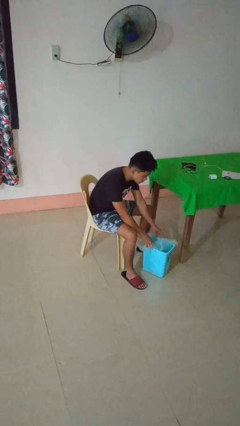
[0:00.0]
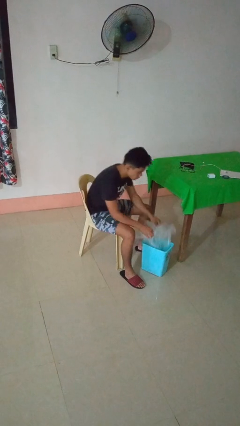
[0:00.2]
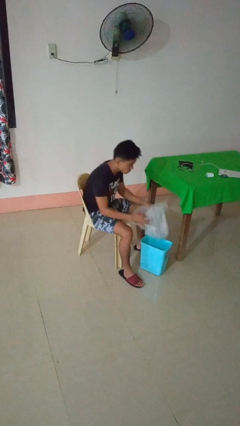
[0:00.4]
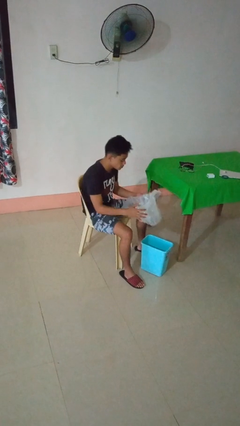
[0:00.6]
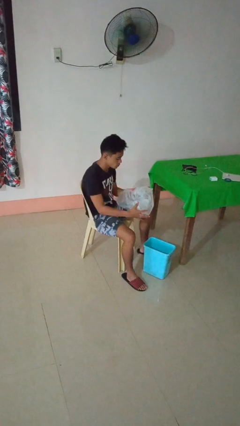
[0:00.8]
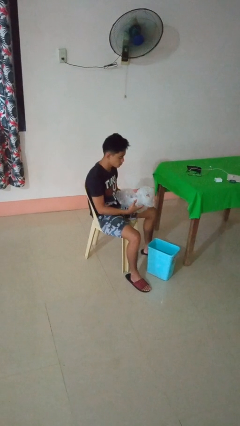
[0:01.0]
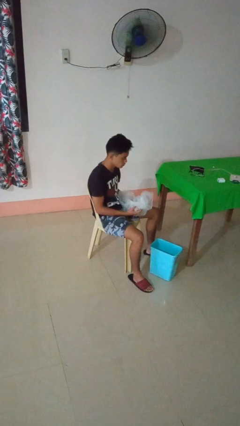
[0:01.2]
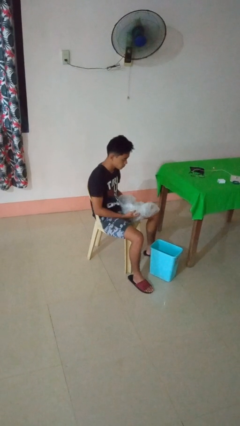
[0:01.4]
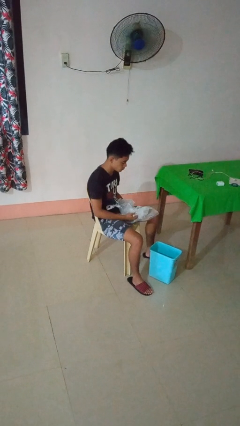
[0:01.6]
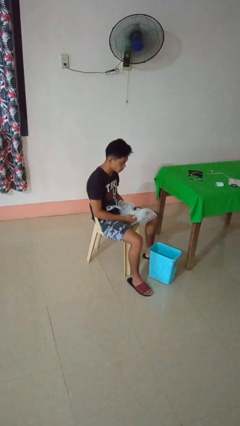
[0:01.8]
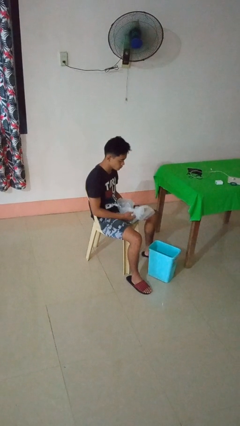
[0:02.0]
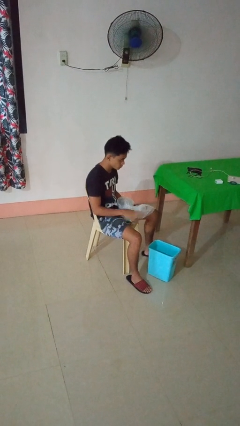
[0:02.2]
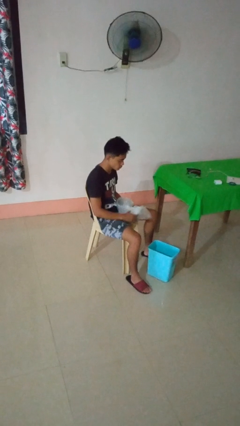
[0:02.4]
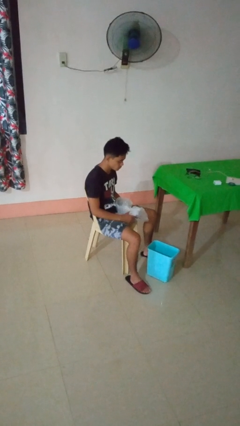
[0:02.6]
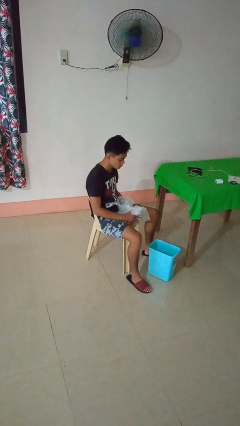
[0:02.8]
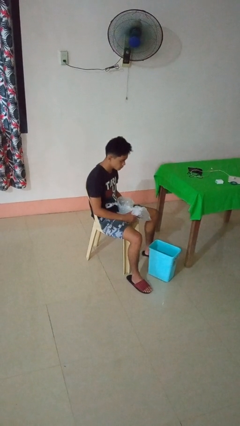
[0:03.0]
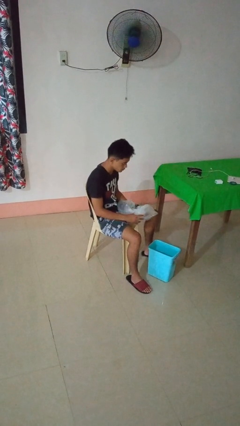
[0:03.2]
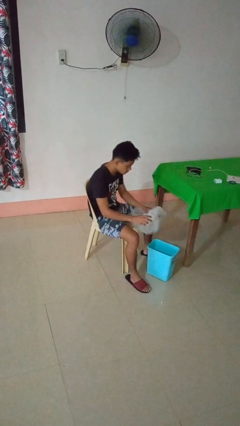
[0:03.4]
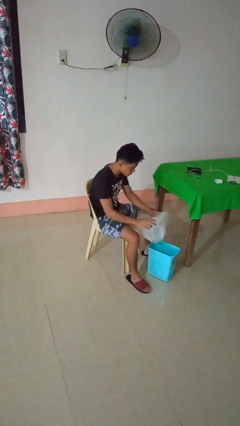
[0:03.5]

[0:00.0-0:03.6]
person removes trashbag from trashcan

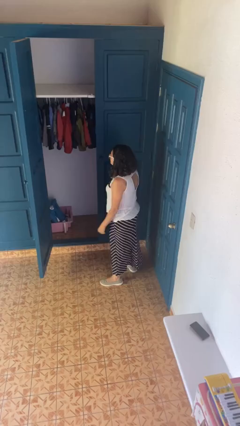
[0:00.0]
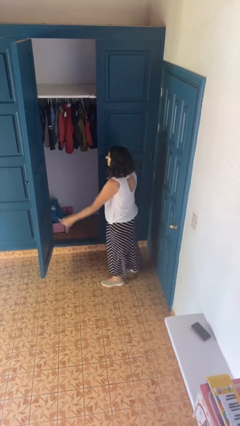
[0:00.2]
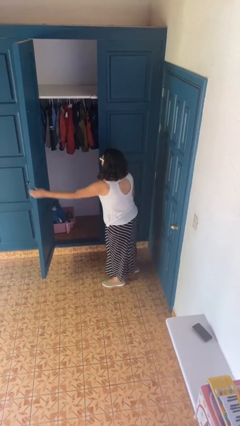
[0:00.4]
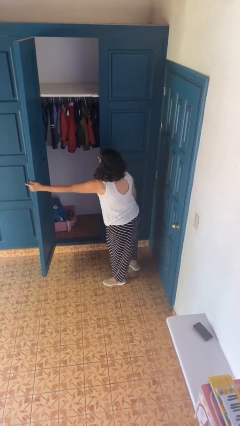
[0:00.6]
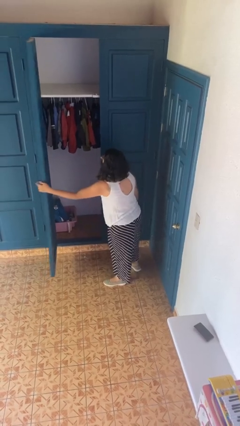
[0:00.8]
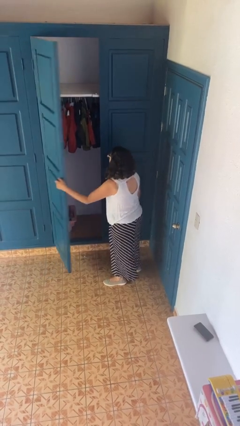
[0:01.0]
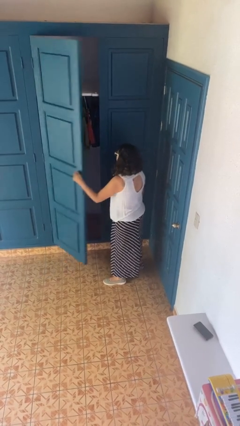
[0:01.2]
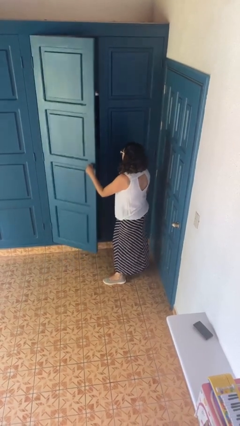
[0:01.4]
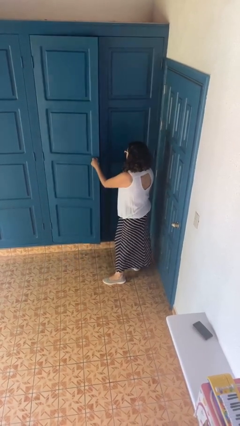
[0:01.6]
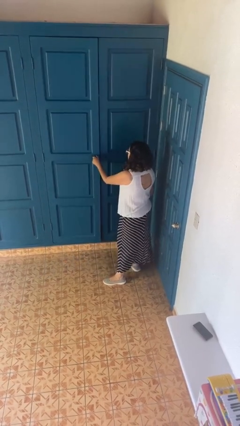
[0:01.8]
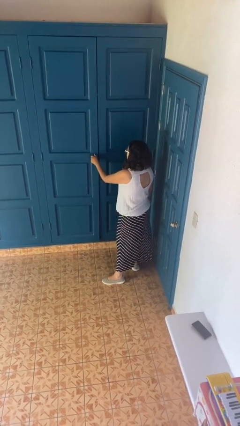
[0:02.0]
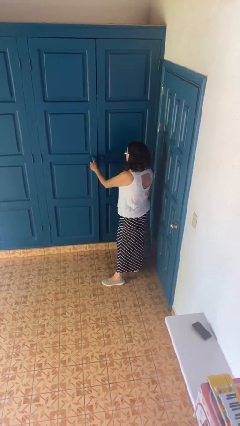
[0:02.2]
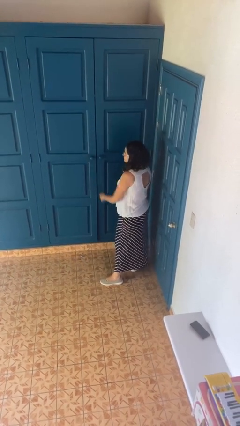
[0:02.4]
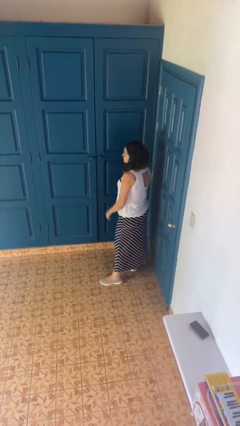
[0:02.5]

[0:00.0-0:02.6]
person closes closet door

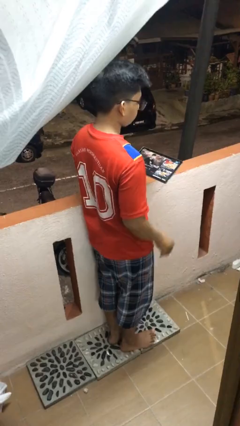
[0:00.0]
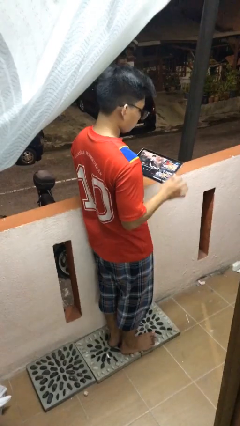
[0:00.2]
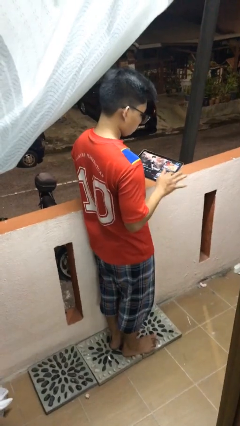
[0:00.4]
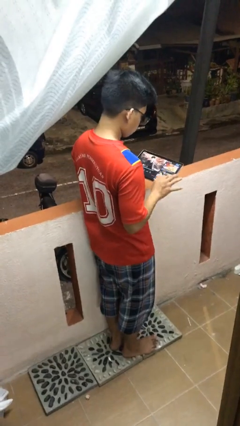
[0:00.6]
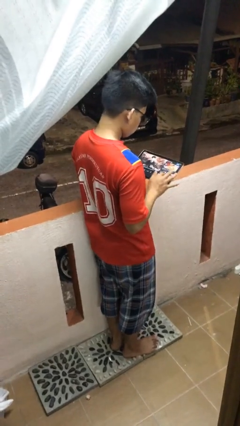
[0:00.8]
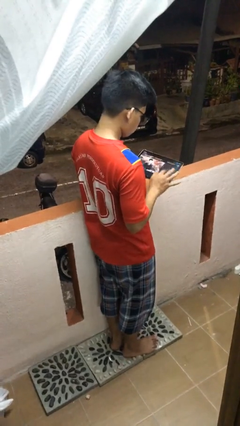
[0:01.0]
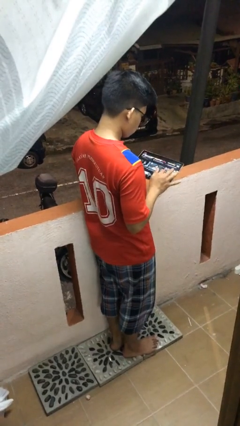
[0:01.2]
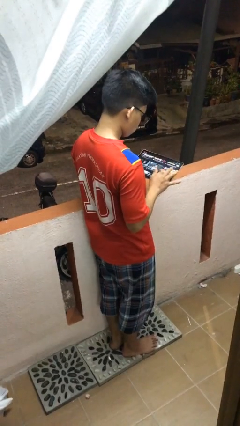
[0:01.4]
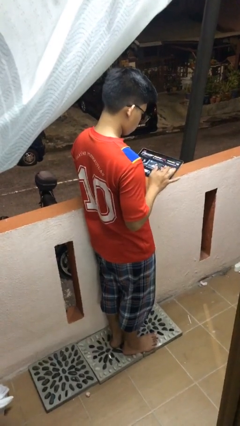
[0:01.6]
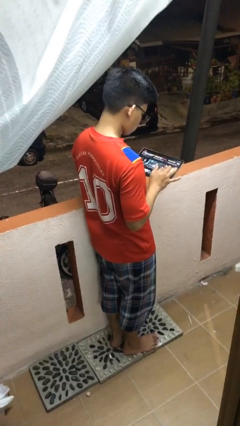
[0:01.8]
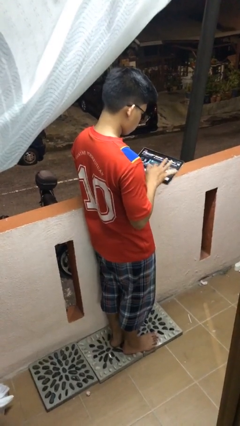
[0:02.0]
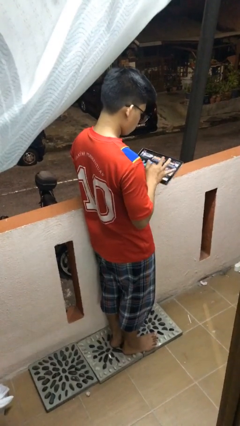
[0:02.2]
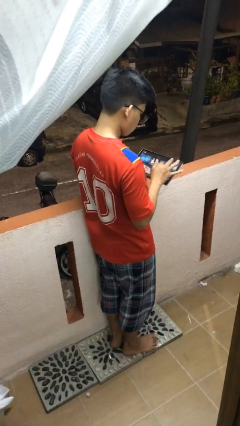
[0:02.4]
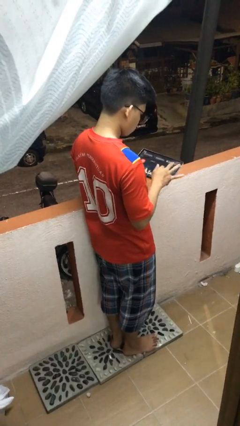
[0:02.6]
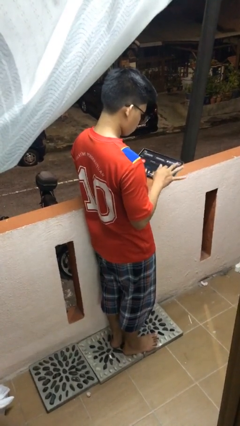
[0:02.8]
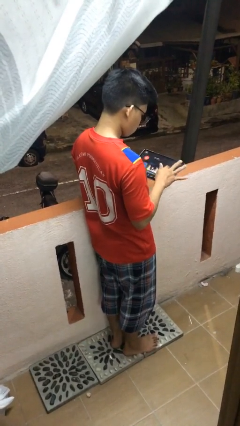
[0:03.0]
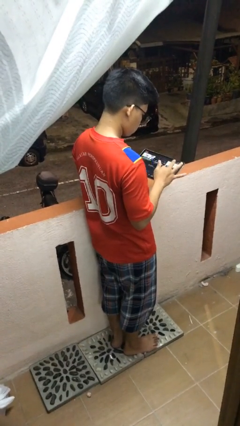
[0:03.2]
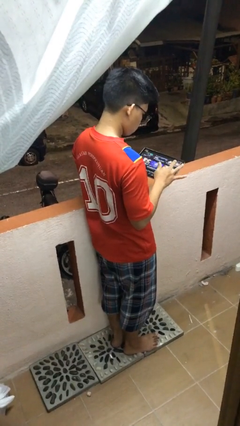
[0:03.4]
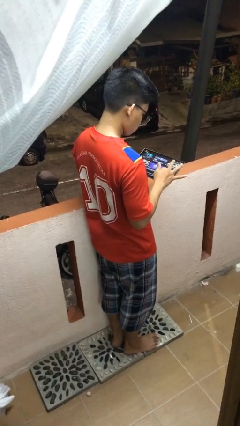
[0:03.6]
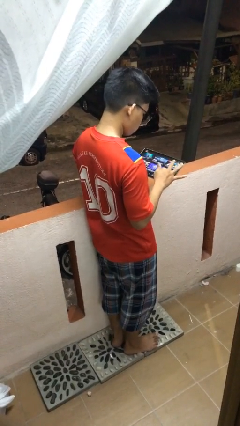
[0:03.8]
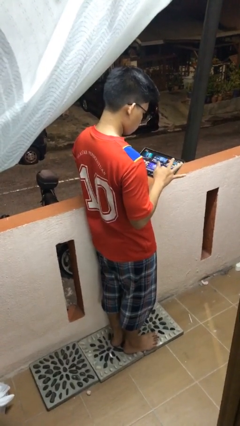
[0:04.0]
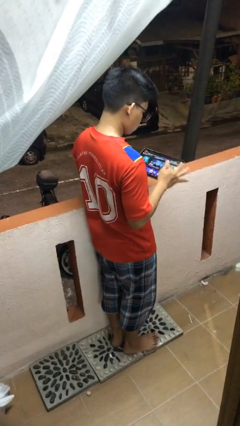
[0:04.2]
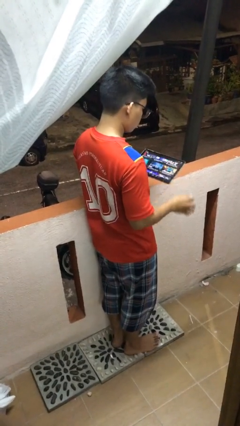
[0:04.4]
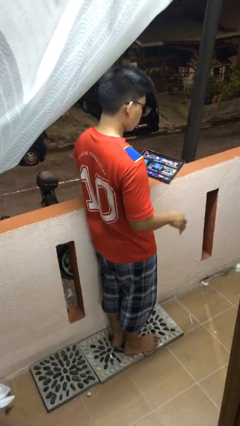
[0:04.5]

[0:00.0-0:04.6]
person interacts with tablet

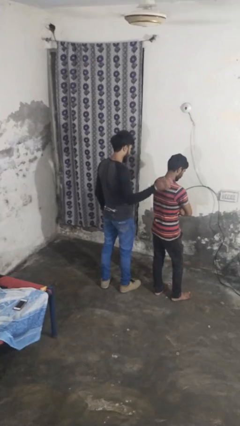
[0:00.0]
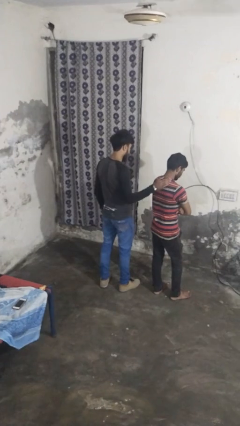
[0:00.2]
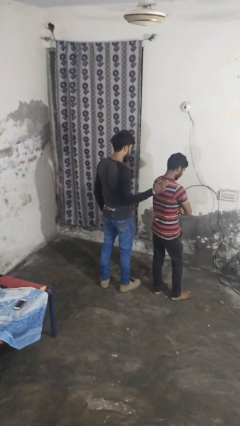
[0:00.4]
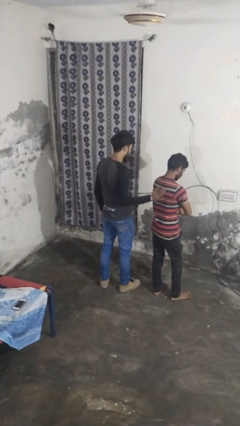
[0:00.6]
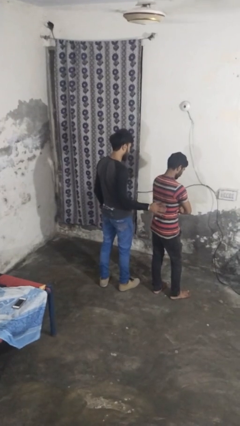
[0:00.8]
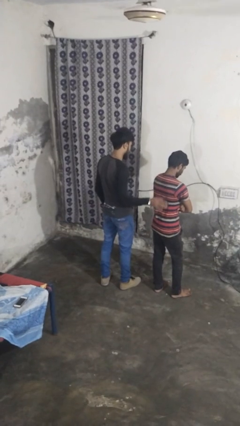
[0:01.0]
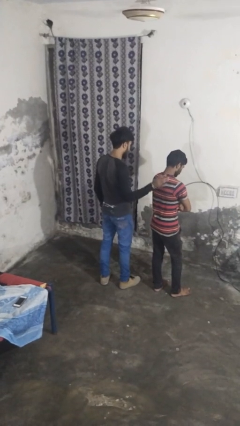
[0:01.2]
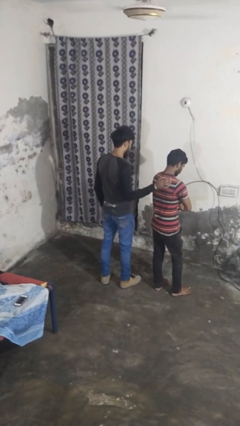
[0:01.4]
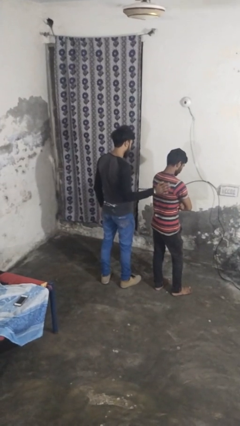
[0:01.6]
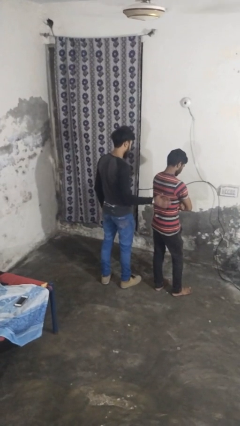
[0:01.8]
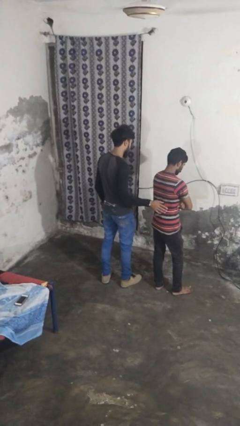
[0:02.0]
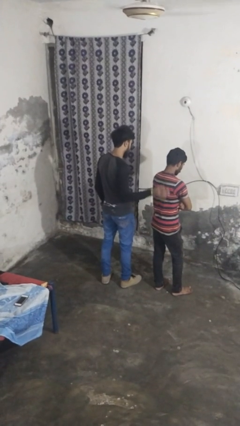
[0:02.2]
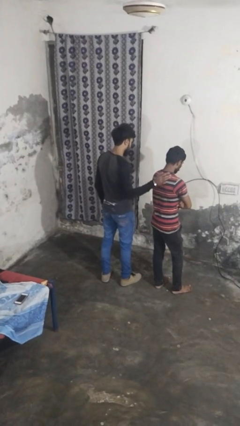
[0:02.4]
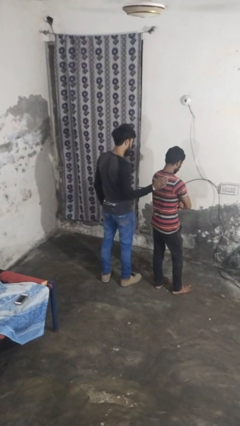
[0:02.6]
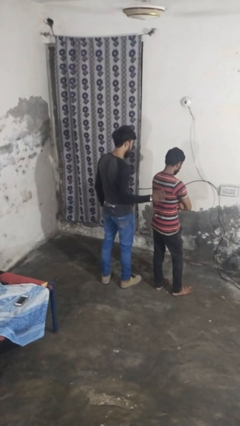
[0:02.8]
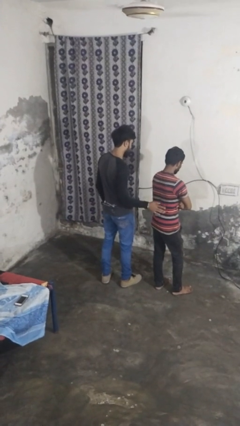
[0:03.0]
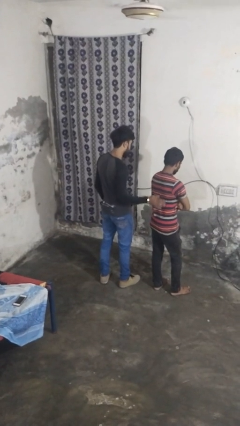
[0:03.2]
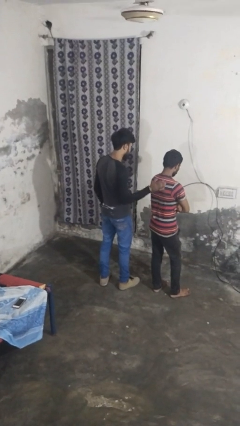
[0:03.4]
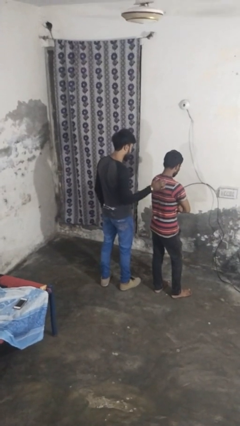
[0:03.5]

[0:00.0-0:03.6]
person touches back of person

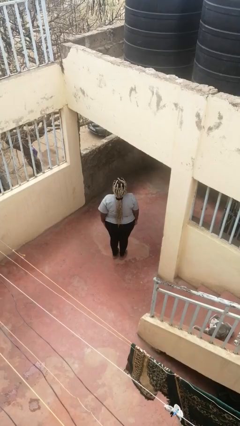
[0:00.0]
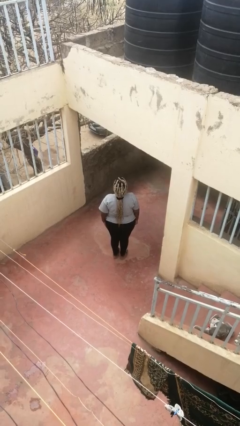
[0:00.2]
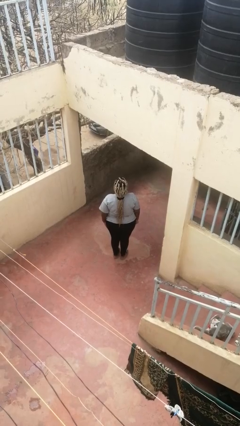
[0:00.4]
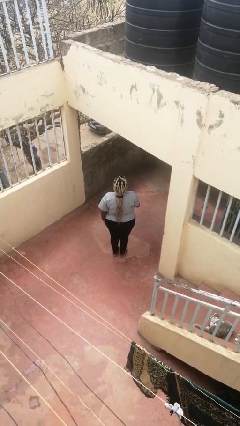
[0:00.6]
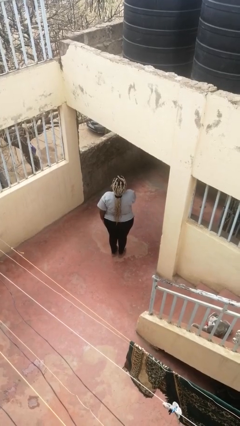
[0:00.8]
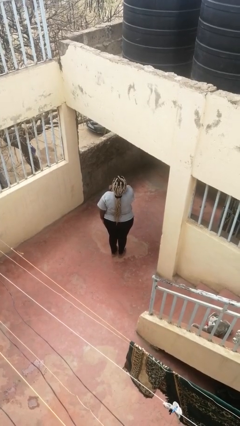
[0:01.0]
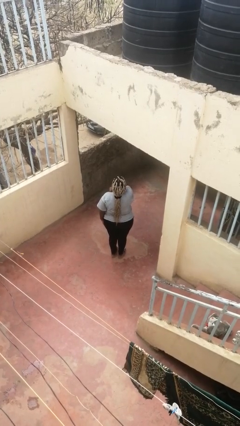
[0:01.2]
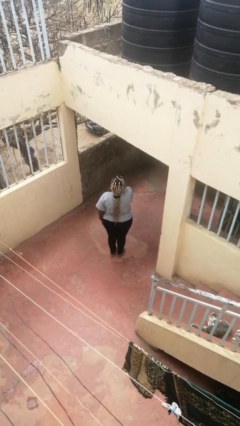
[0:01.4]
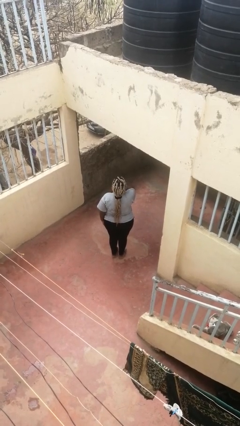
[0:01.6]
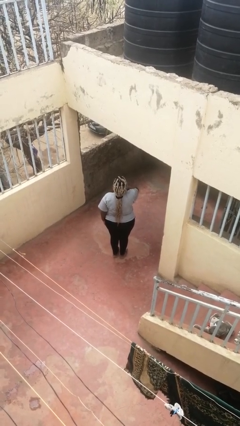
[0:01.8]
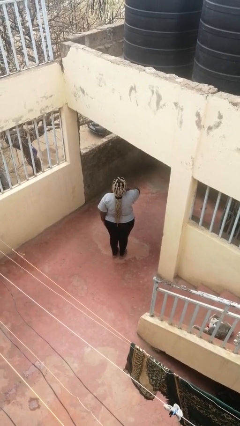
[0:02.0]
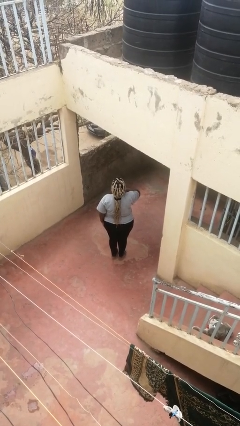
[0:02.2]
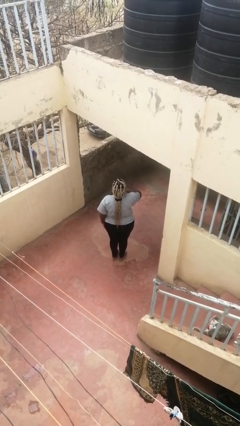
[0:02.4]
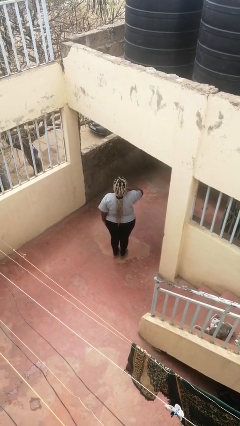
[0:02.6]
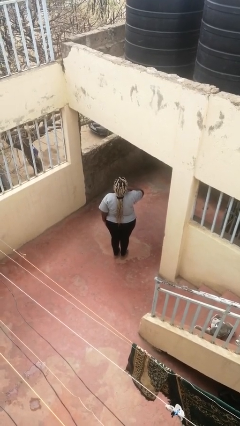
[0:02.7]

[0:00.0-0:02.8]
person gestures cut

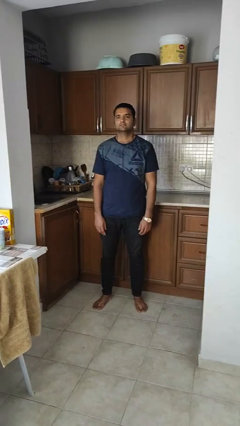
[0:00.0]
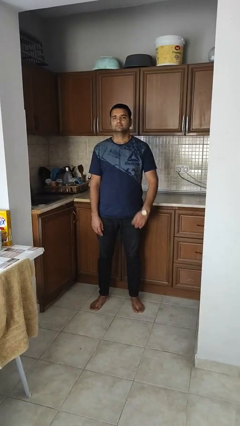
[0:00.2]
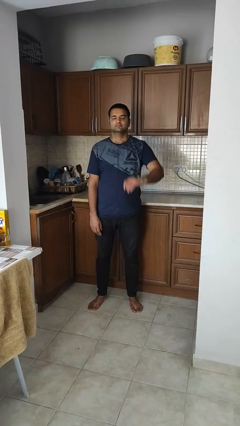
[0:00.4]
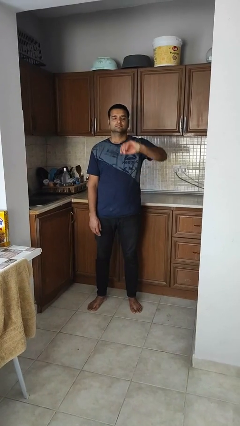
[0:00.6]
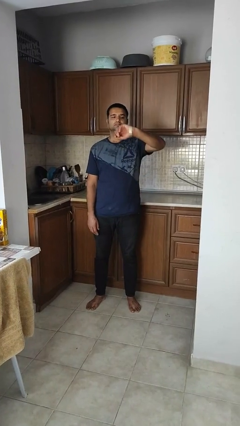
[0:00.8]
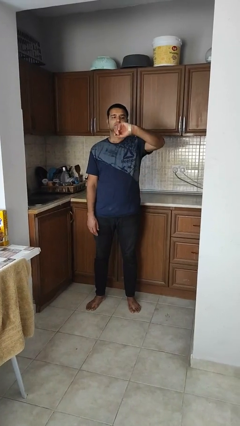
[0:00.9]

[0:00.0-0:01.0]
person looks at wristwatch
